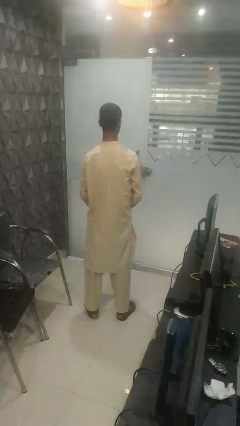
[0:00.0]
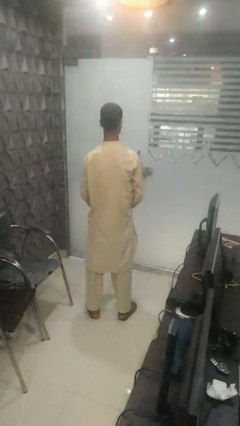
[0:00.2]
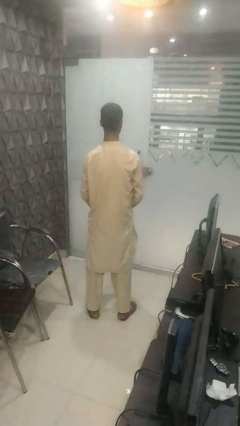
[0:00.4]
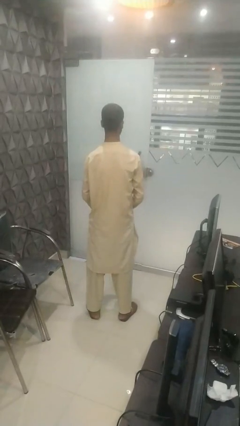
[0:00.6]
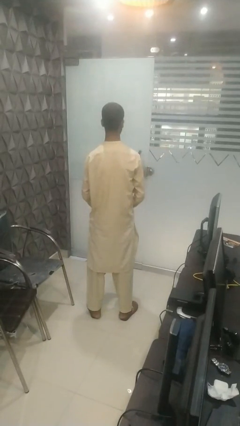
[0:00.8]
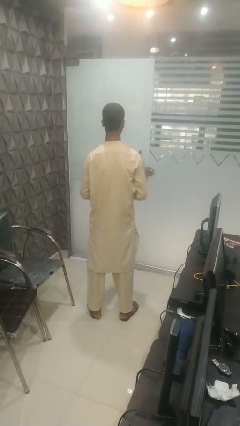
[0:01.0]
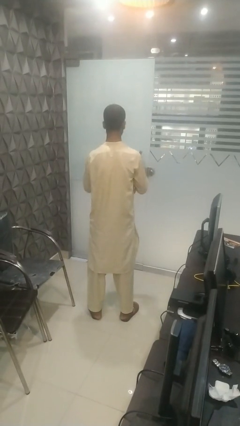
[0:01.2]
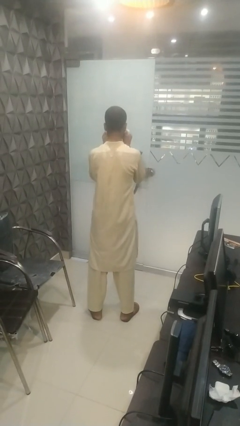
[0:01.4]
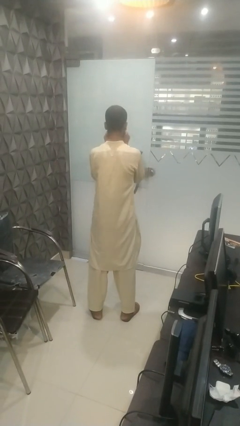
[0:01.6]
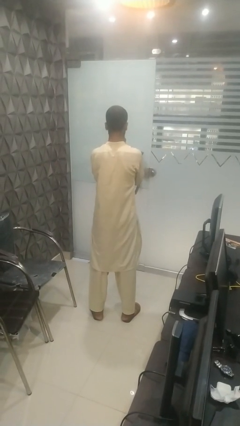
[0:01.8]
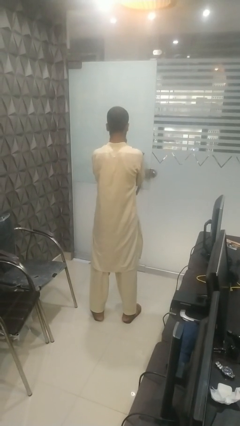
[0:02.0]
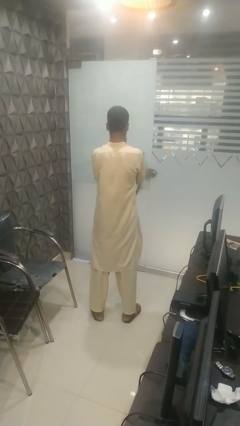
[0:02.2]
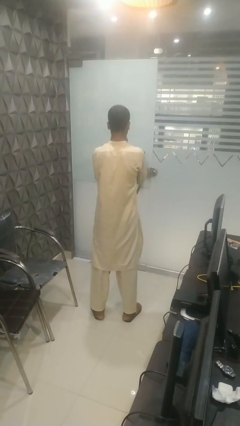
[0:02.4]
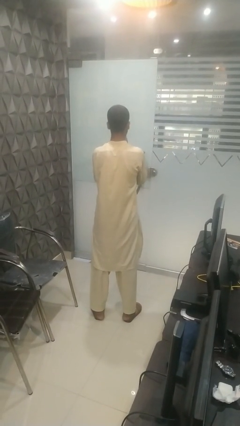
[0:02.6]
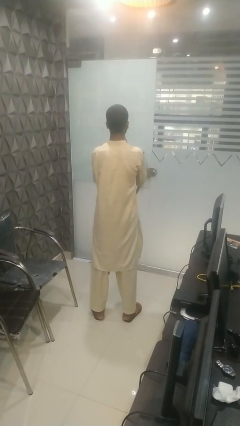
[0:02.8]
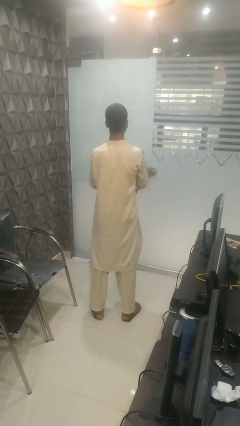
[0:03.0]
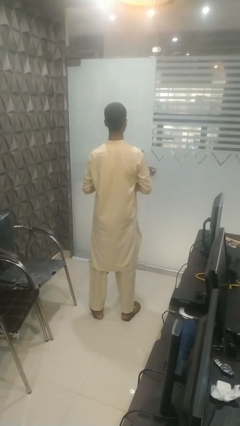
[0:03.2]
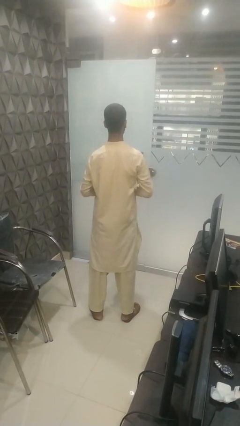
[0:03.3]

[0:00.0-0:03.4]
person blows nose

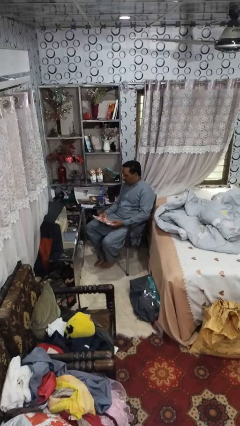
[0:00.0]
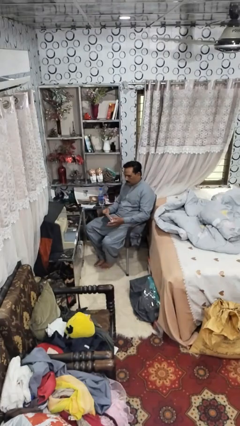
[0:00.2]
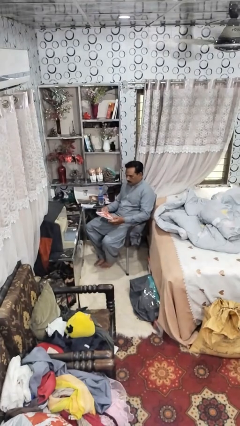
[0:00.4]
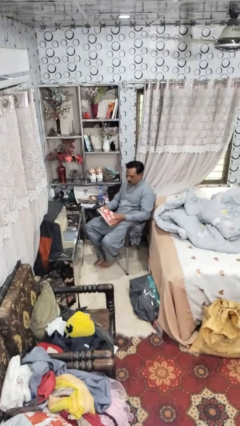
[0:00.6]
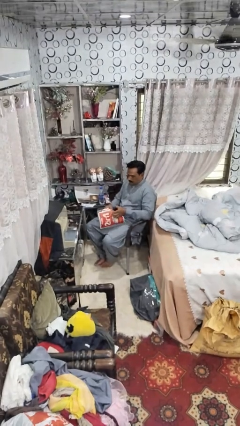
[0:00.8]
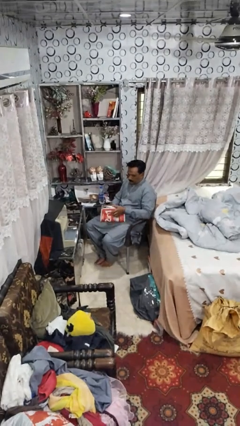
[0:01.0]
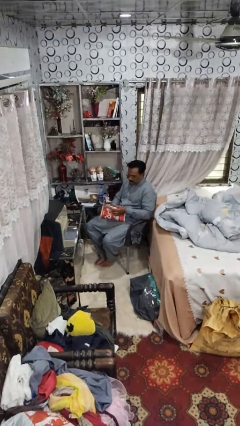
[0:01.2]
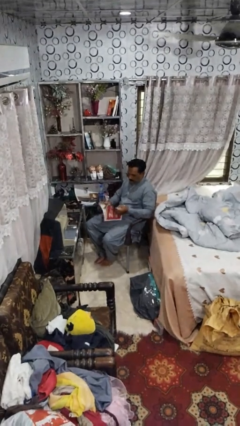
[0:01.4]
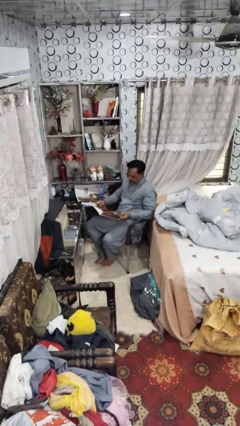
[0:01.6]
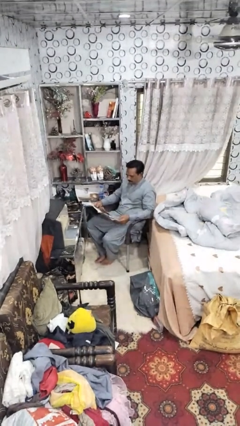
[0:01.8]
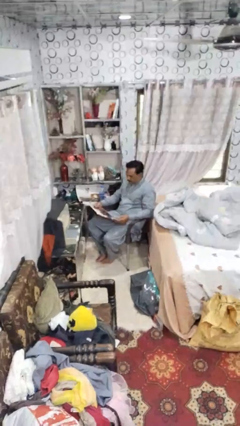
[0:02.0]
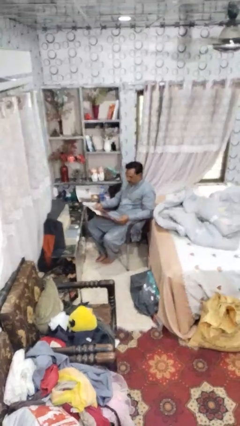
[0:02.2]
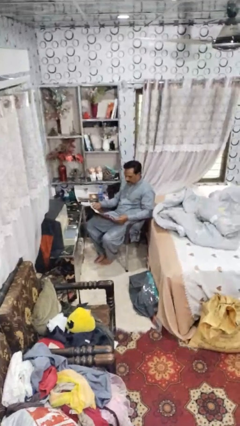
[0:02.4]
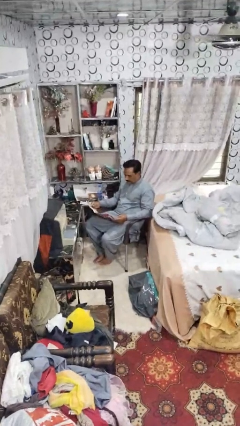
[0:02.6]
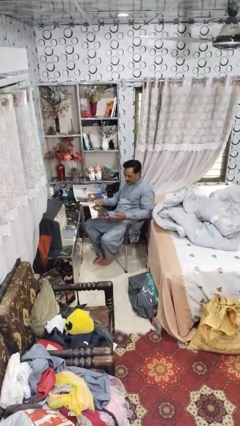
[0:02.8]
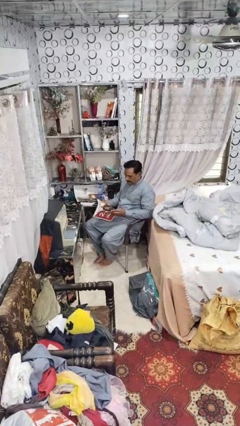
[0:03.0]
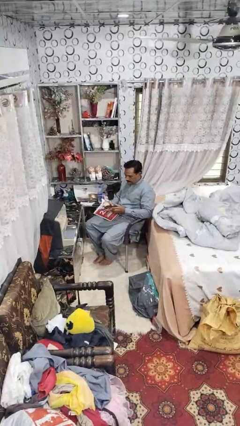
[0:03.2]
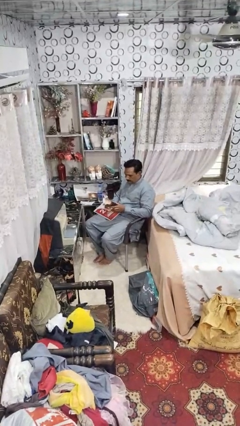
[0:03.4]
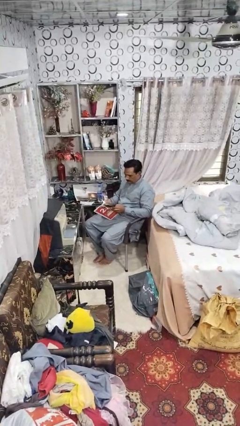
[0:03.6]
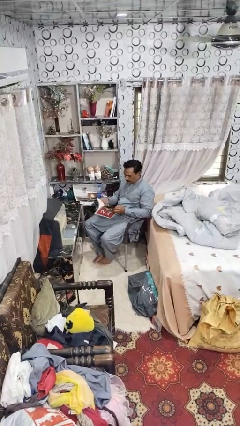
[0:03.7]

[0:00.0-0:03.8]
person reads magazine

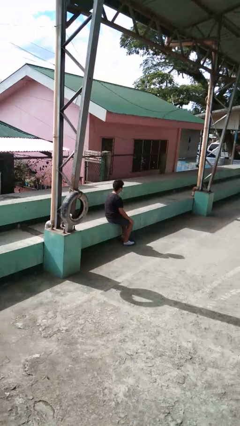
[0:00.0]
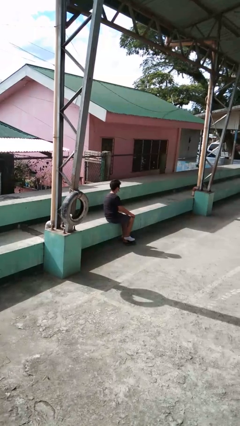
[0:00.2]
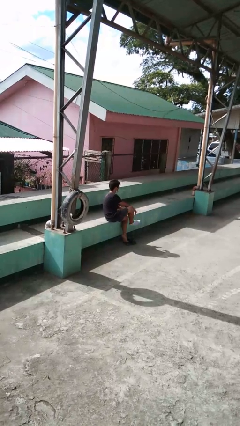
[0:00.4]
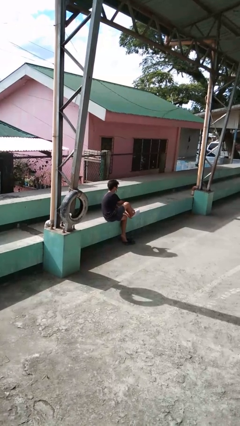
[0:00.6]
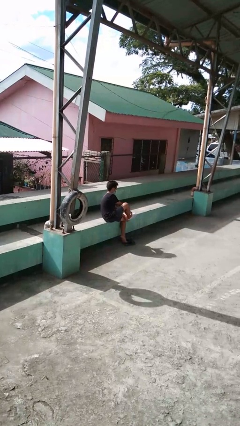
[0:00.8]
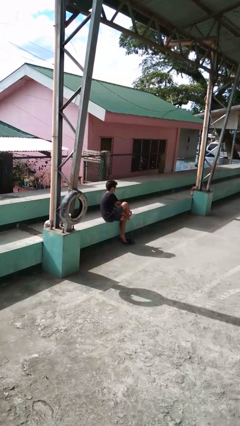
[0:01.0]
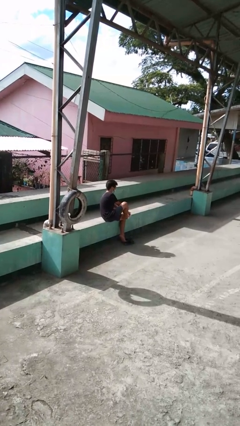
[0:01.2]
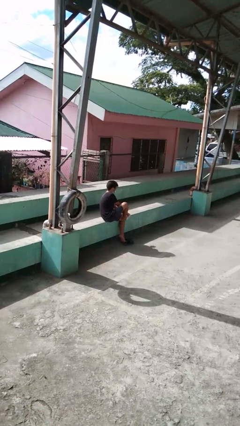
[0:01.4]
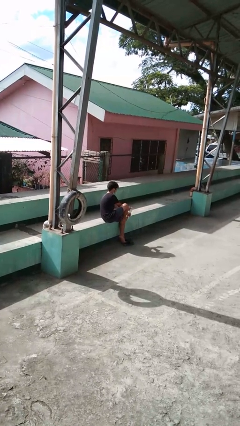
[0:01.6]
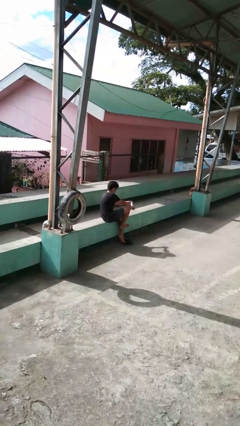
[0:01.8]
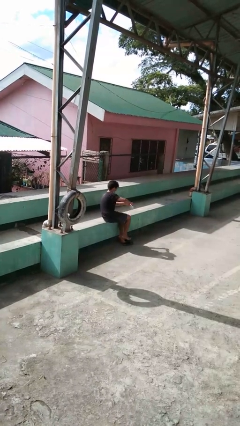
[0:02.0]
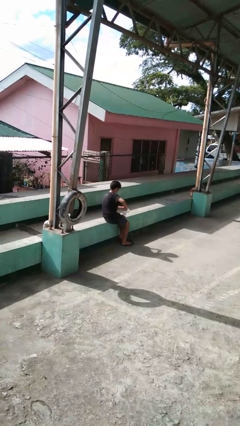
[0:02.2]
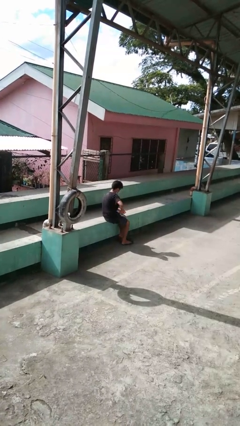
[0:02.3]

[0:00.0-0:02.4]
person takes off socks

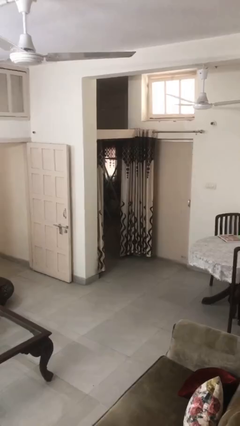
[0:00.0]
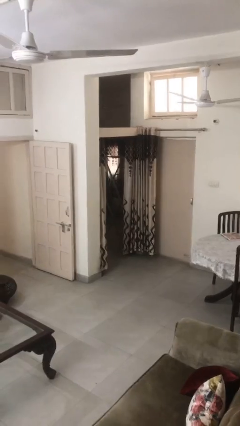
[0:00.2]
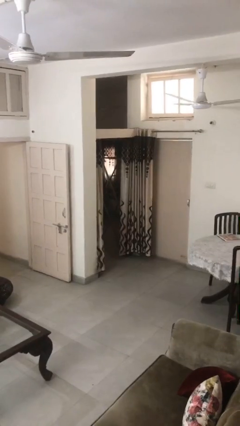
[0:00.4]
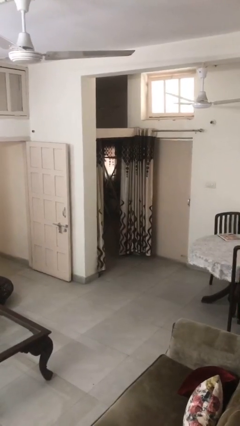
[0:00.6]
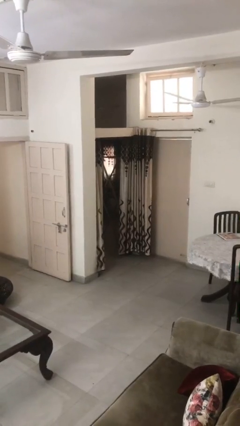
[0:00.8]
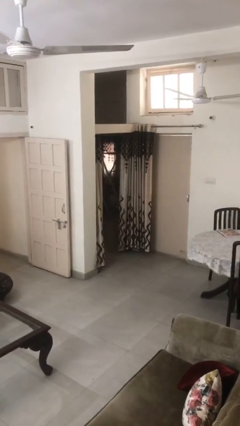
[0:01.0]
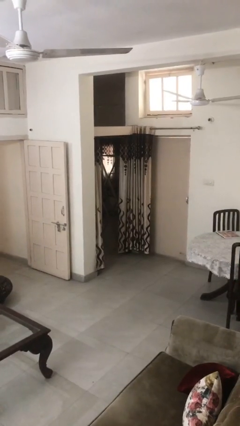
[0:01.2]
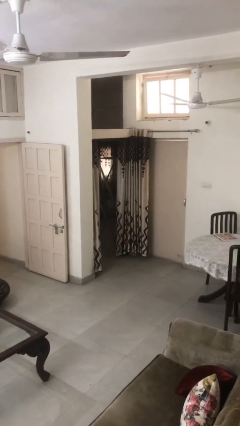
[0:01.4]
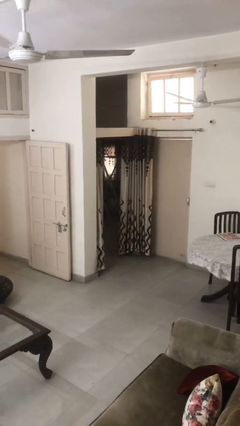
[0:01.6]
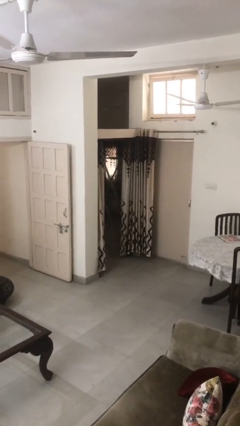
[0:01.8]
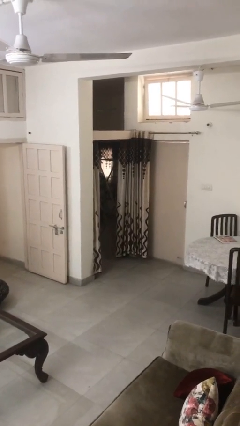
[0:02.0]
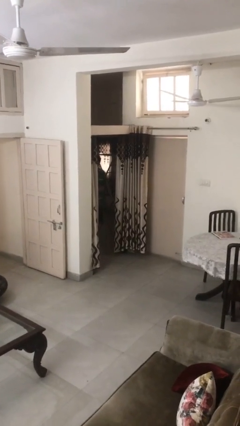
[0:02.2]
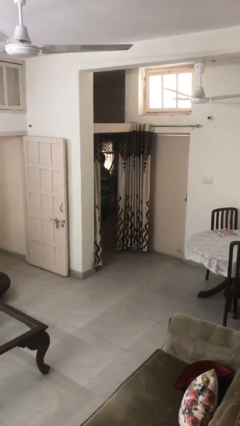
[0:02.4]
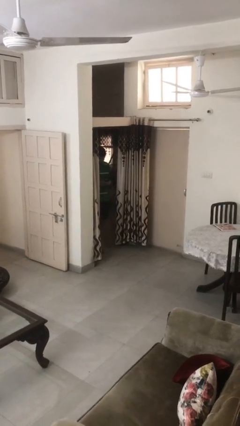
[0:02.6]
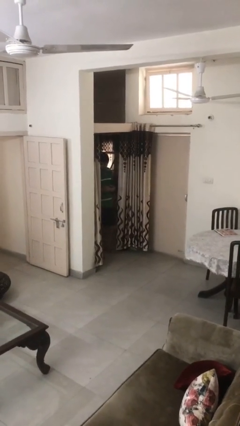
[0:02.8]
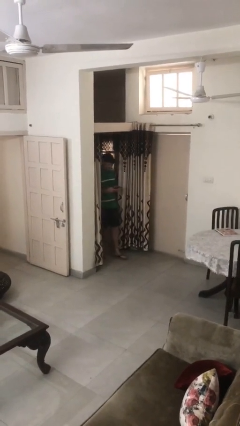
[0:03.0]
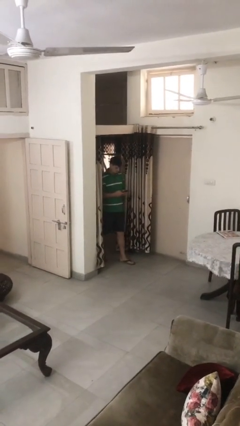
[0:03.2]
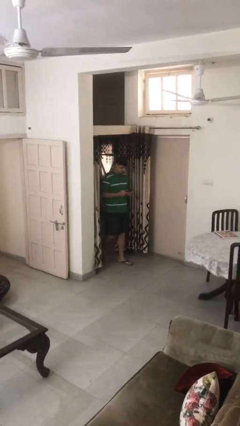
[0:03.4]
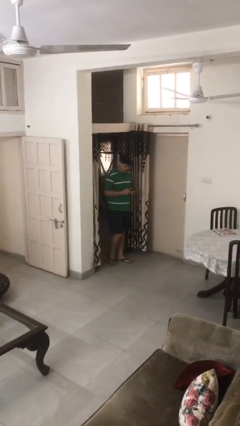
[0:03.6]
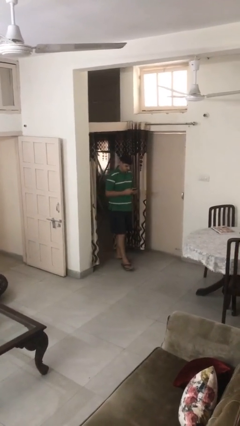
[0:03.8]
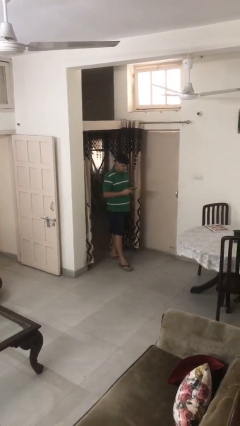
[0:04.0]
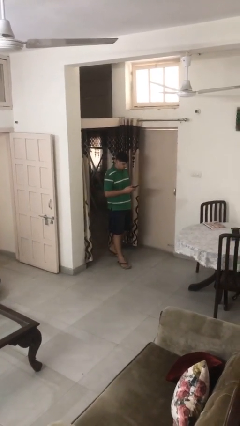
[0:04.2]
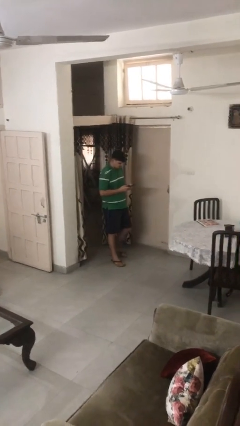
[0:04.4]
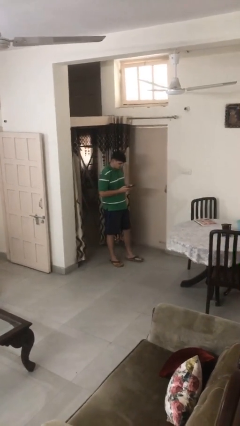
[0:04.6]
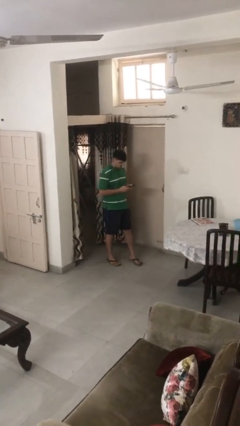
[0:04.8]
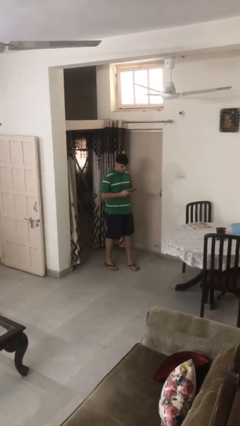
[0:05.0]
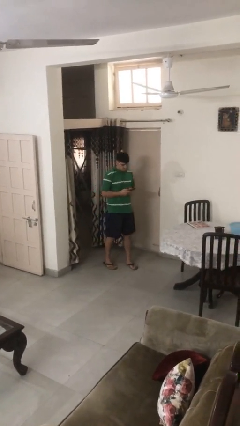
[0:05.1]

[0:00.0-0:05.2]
person enters scene through structure

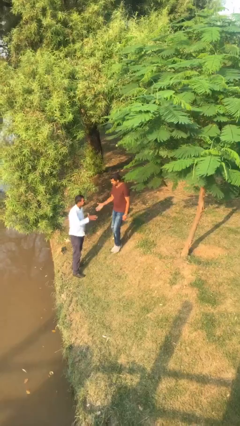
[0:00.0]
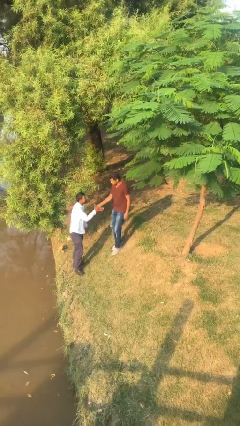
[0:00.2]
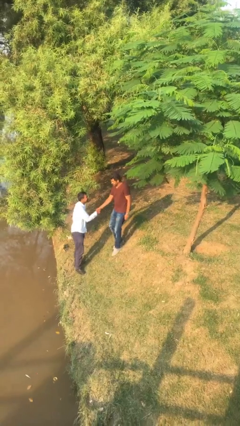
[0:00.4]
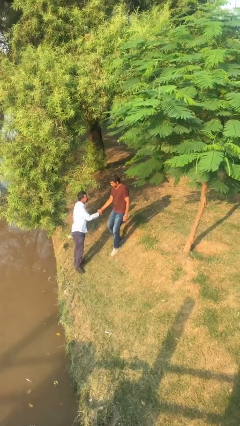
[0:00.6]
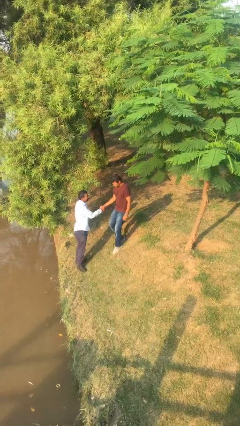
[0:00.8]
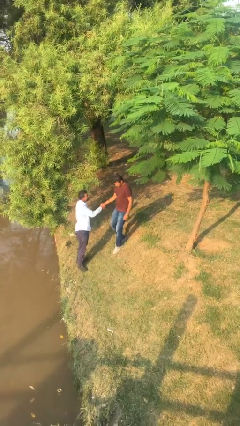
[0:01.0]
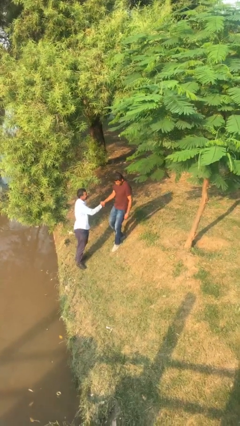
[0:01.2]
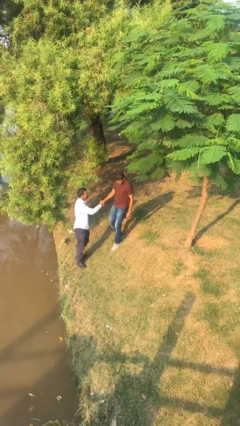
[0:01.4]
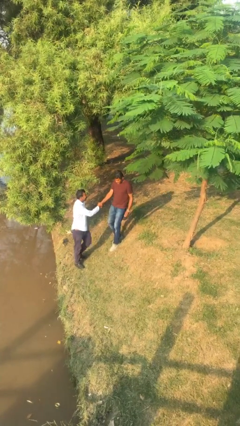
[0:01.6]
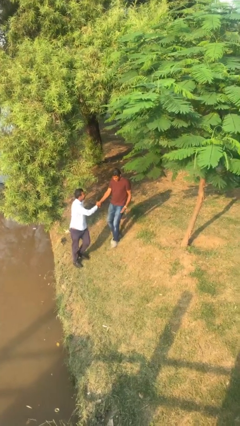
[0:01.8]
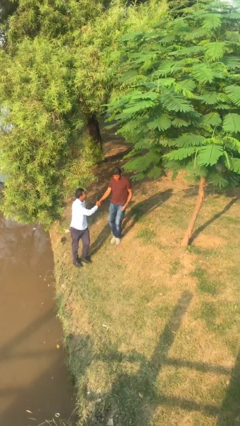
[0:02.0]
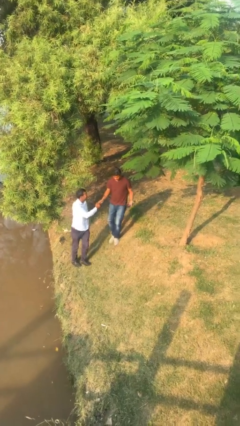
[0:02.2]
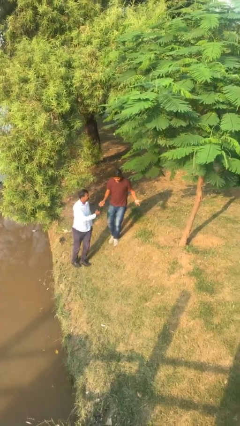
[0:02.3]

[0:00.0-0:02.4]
person shakes hand

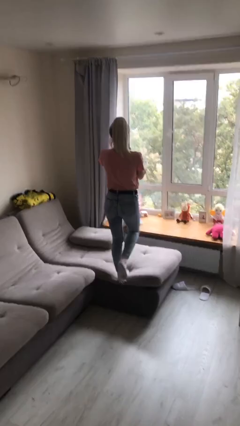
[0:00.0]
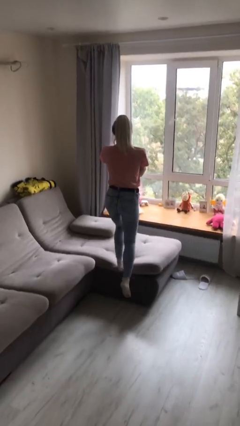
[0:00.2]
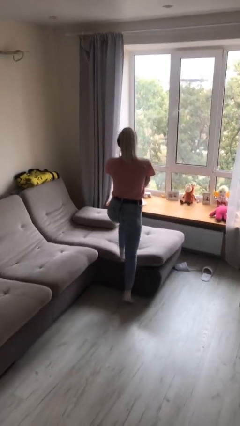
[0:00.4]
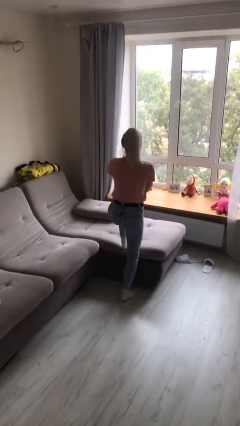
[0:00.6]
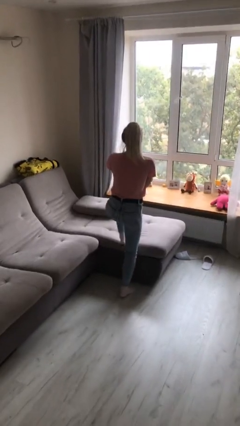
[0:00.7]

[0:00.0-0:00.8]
person climbs off couch
